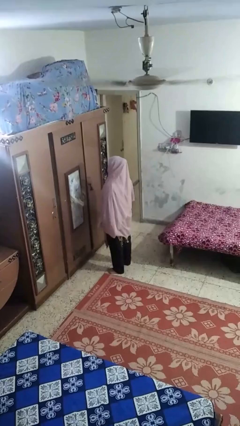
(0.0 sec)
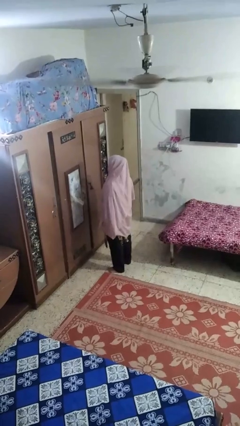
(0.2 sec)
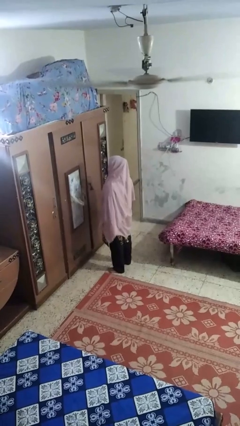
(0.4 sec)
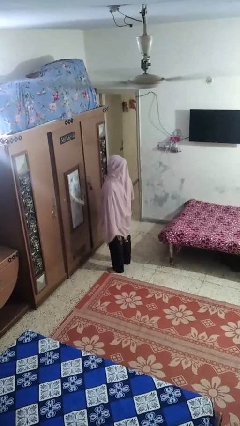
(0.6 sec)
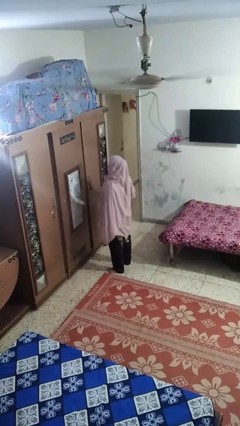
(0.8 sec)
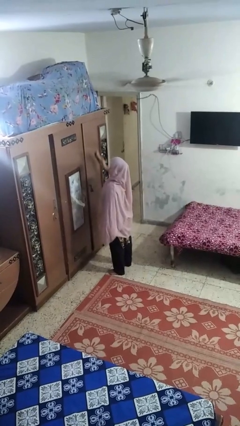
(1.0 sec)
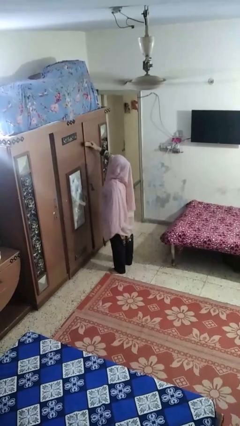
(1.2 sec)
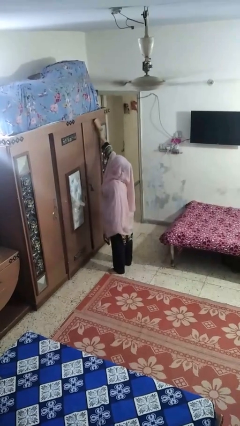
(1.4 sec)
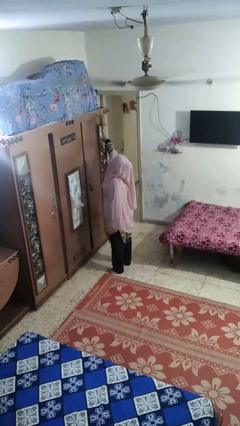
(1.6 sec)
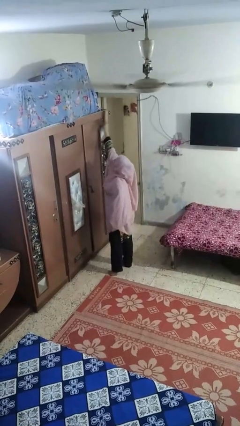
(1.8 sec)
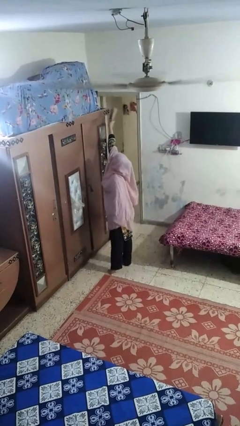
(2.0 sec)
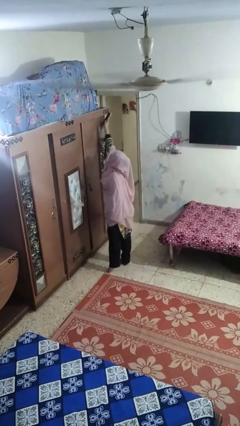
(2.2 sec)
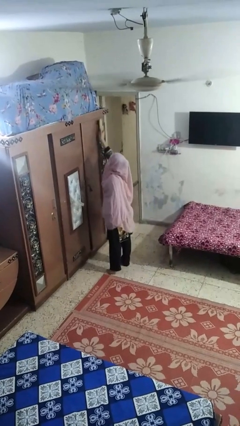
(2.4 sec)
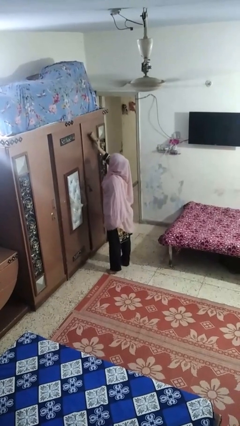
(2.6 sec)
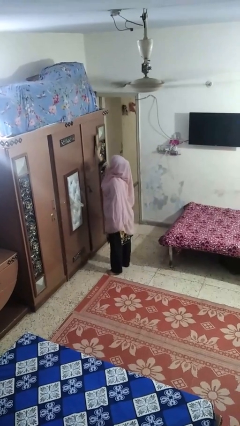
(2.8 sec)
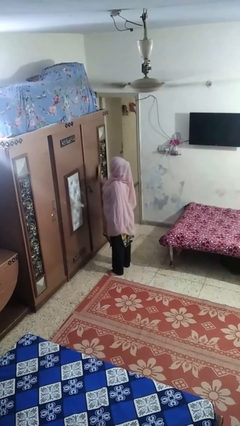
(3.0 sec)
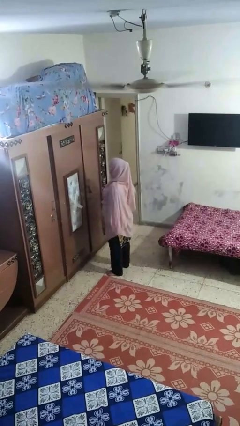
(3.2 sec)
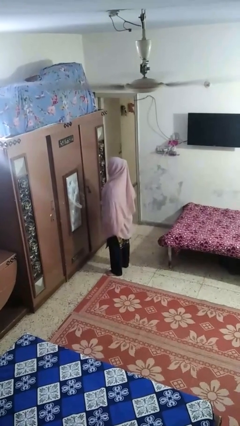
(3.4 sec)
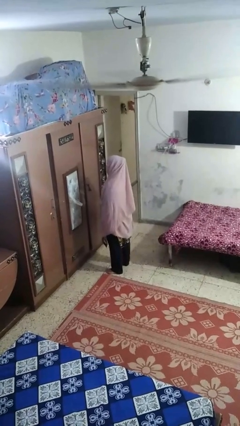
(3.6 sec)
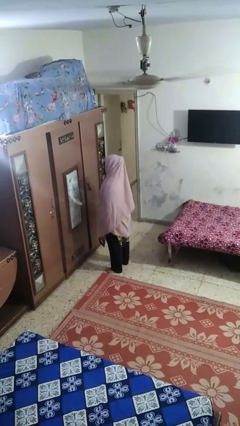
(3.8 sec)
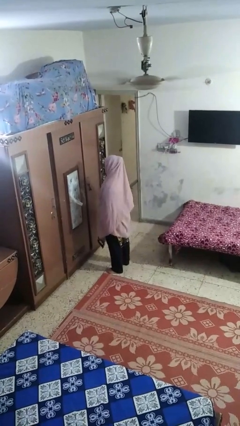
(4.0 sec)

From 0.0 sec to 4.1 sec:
person dusts furniture

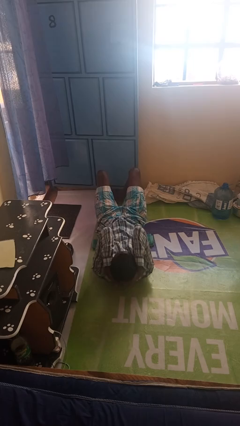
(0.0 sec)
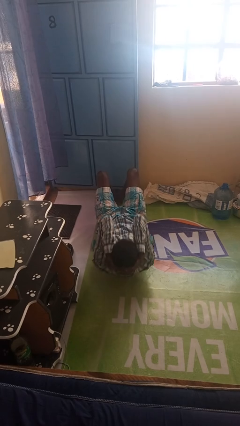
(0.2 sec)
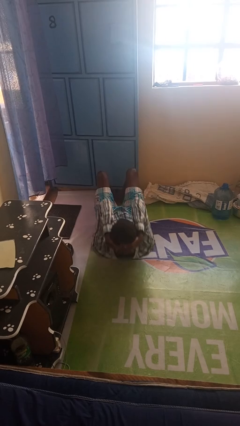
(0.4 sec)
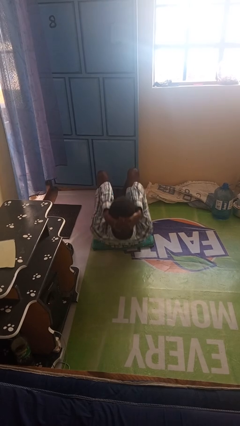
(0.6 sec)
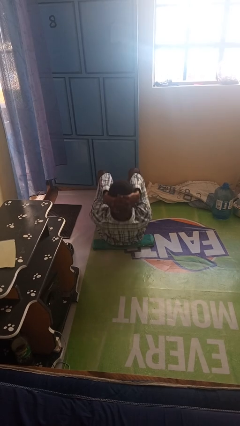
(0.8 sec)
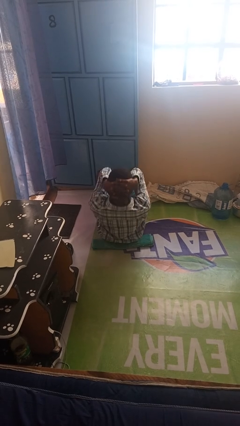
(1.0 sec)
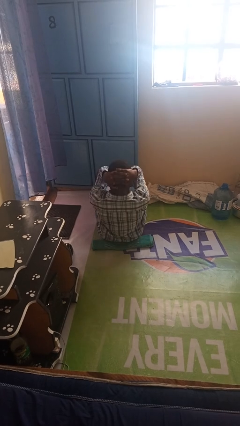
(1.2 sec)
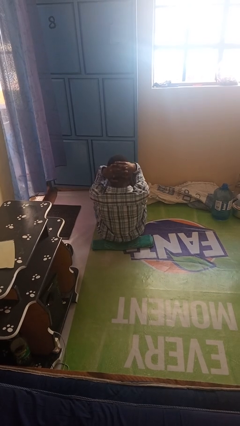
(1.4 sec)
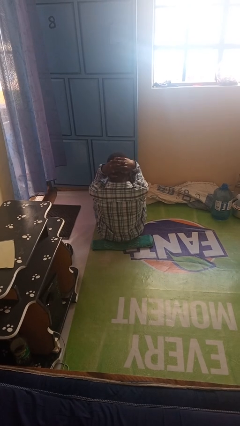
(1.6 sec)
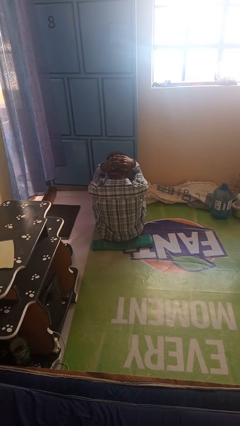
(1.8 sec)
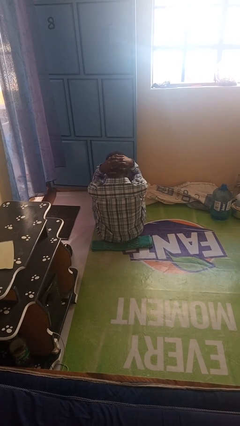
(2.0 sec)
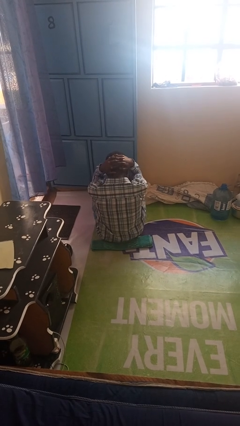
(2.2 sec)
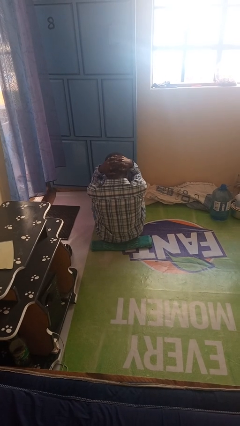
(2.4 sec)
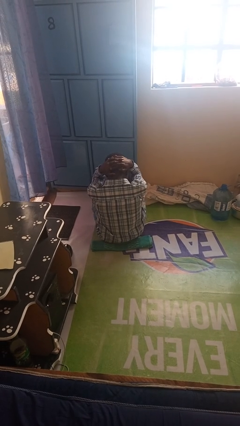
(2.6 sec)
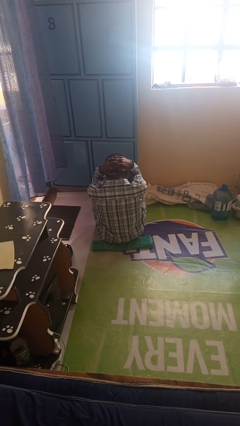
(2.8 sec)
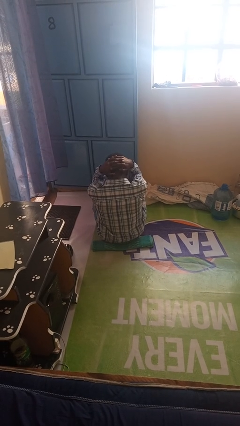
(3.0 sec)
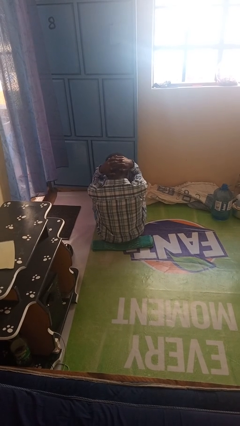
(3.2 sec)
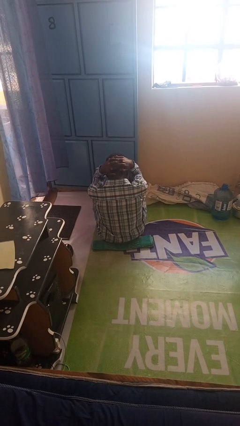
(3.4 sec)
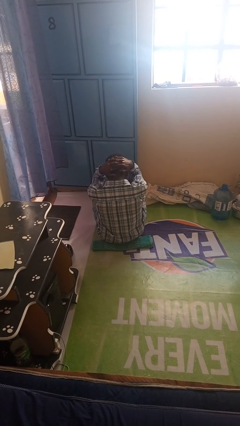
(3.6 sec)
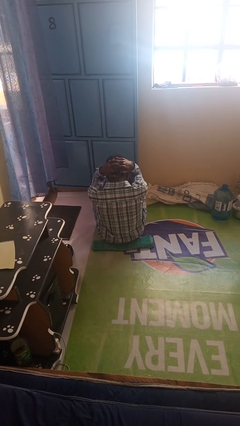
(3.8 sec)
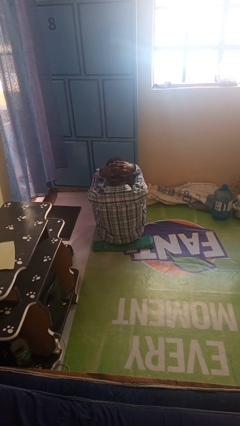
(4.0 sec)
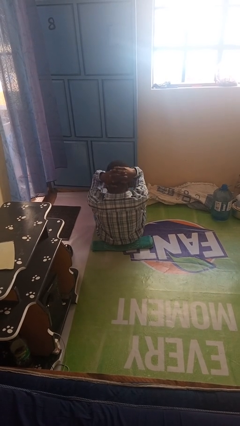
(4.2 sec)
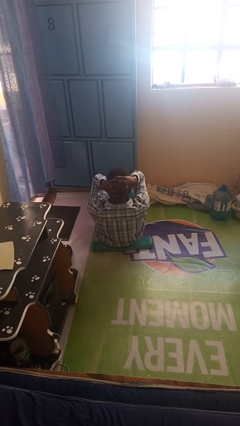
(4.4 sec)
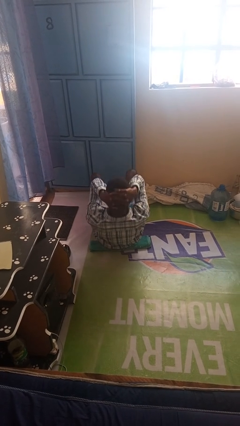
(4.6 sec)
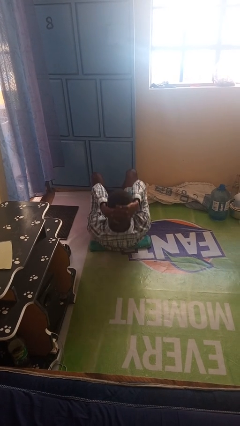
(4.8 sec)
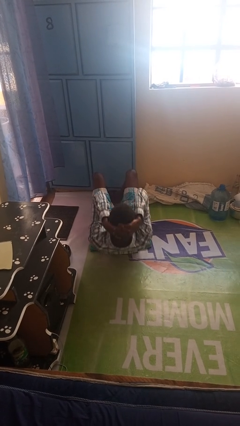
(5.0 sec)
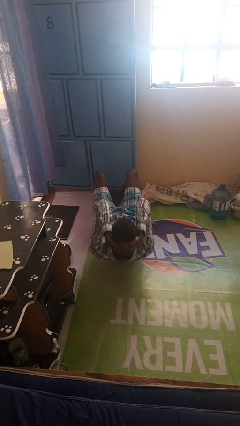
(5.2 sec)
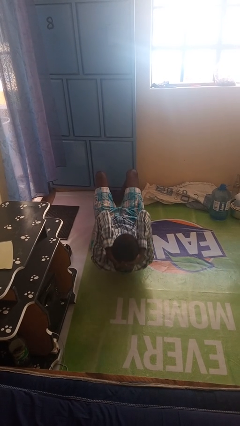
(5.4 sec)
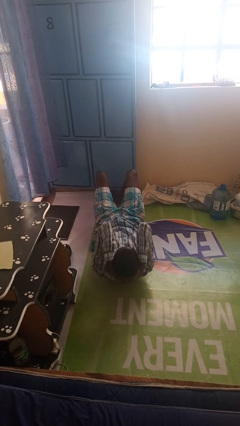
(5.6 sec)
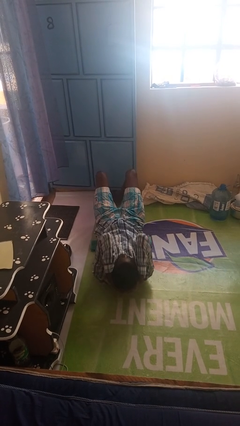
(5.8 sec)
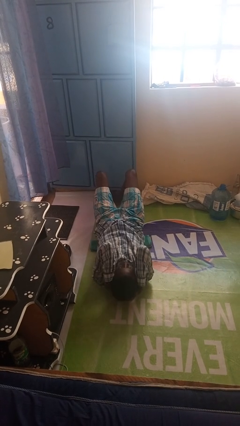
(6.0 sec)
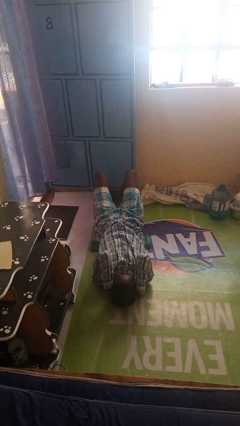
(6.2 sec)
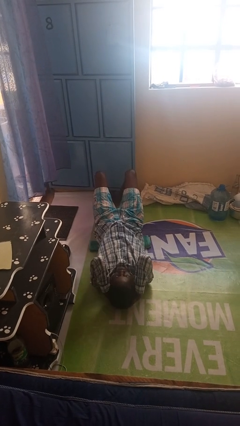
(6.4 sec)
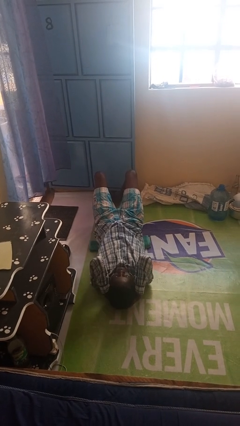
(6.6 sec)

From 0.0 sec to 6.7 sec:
person exercises with situp

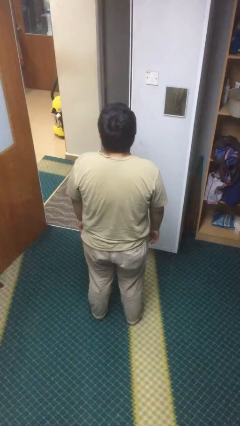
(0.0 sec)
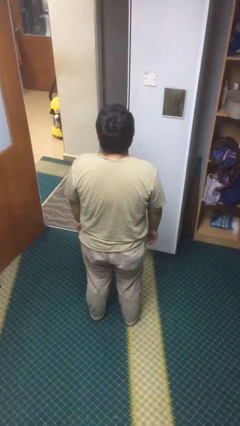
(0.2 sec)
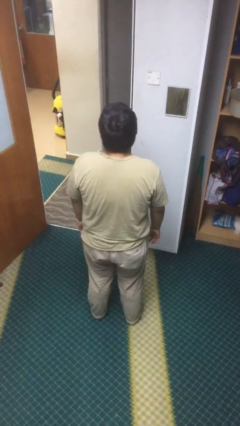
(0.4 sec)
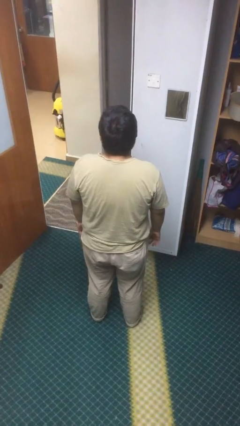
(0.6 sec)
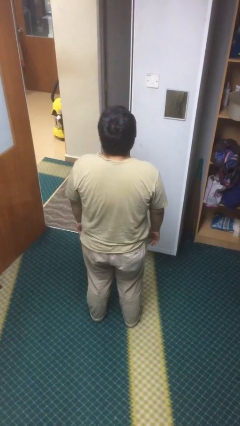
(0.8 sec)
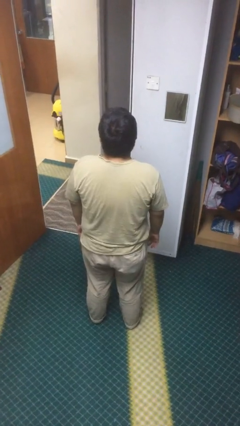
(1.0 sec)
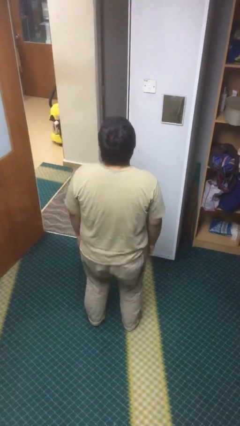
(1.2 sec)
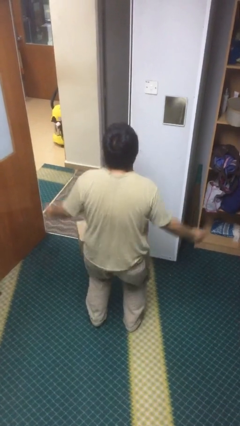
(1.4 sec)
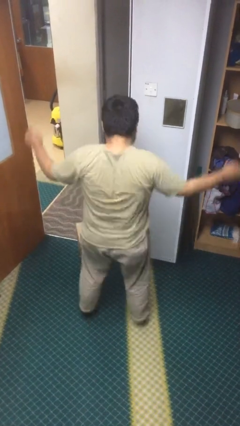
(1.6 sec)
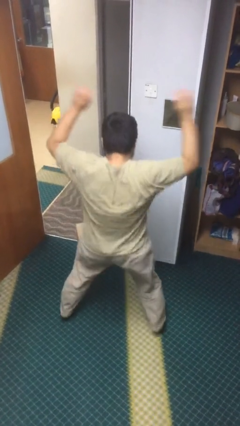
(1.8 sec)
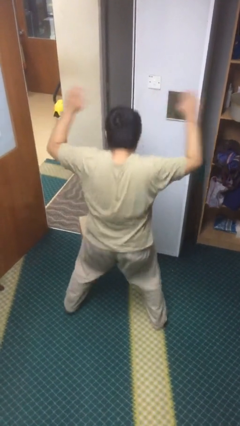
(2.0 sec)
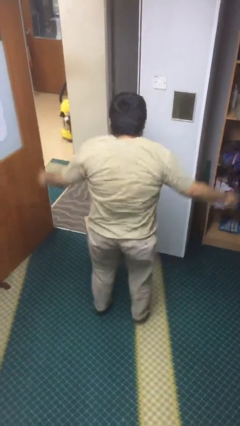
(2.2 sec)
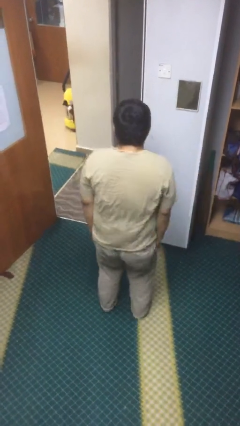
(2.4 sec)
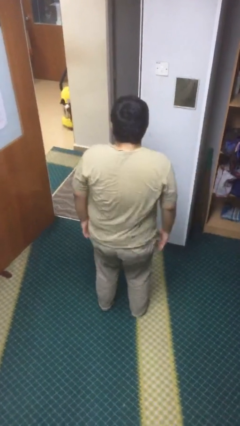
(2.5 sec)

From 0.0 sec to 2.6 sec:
person exercises with jumping jacks

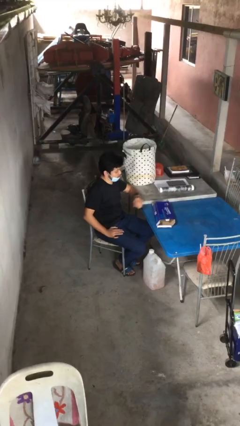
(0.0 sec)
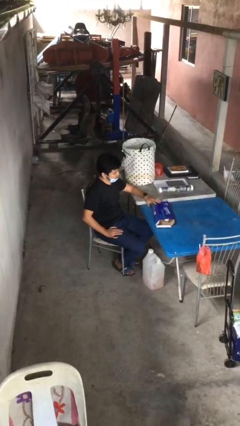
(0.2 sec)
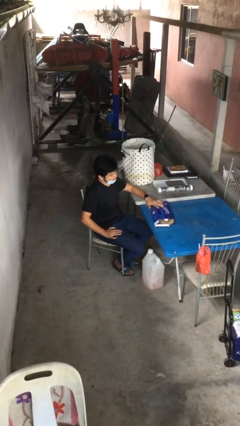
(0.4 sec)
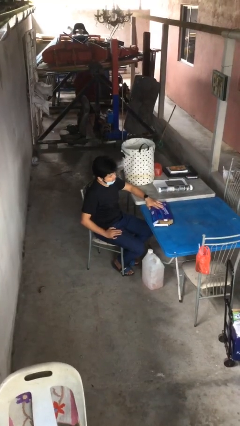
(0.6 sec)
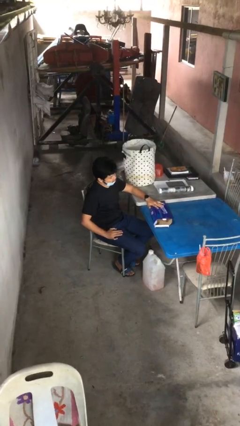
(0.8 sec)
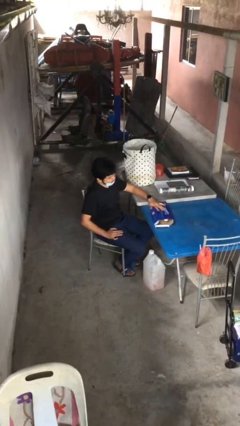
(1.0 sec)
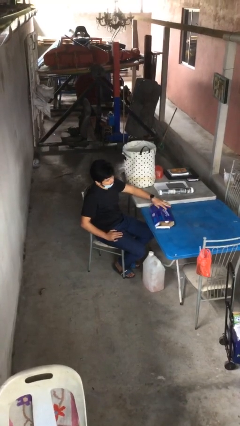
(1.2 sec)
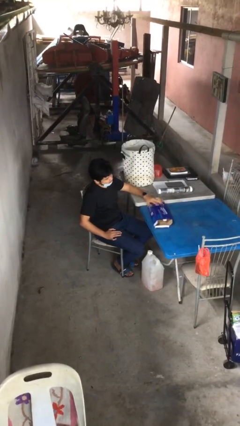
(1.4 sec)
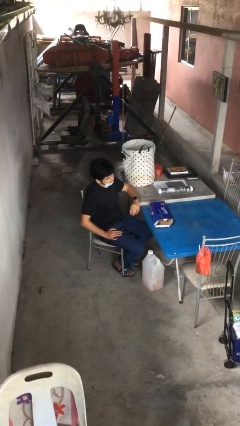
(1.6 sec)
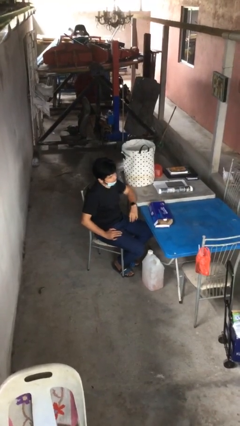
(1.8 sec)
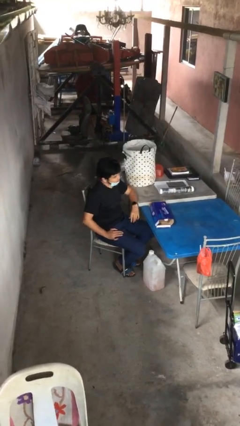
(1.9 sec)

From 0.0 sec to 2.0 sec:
person taps object with finger

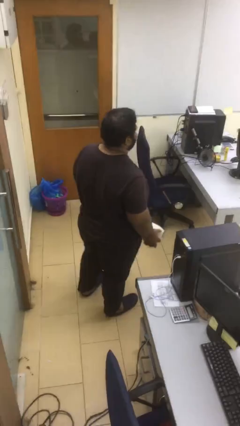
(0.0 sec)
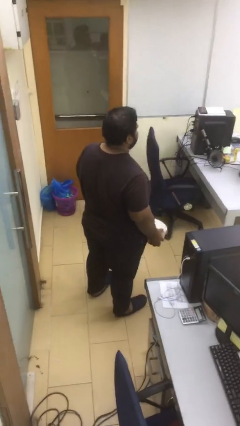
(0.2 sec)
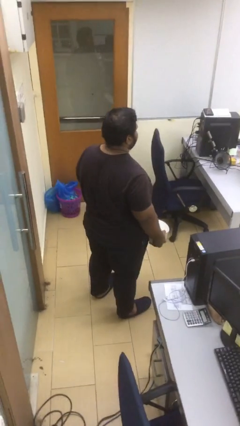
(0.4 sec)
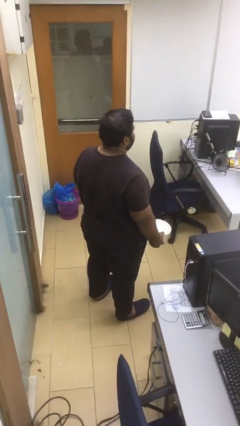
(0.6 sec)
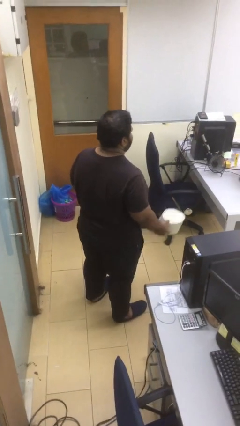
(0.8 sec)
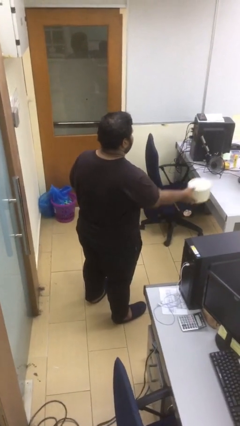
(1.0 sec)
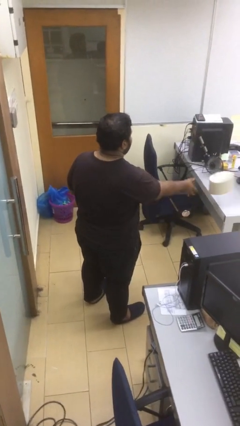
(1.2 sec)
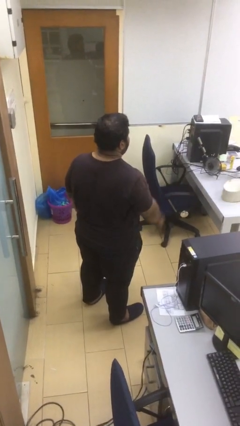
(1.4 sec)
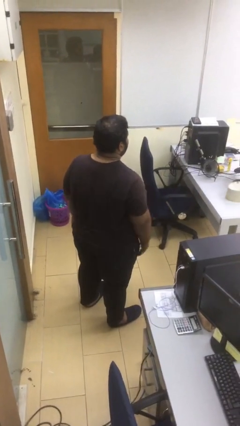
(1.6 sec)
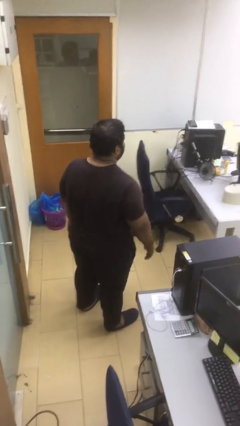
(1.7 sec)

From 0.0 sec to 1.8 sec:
person throws object on table

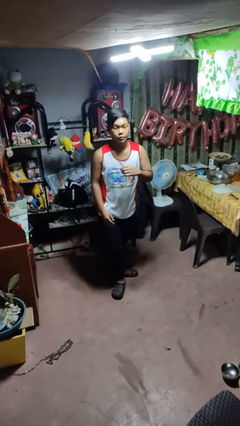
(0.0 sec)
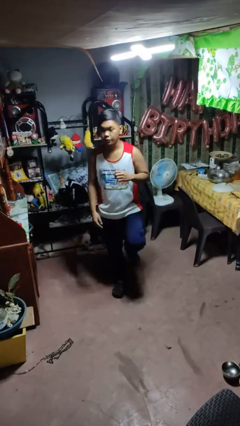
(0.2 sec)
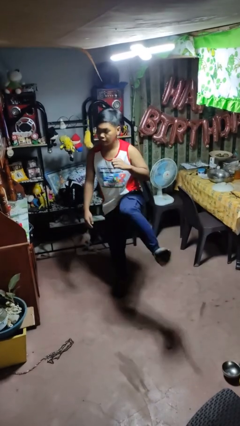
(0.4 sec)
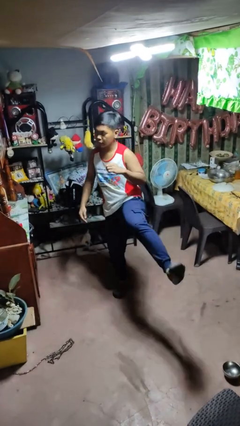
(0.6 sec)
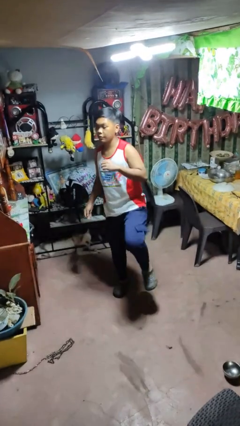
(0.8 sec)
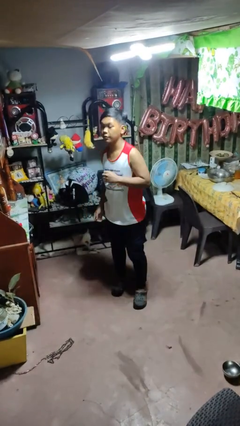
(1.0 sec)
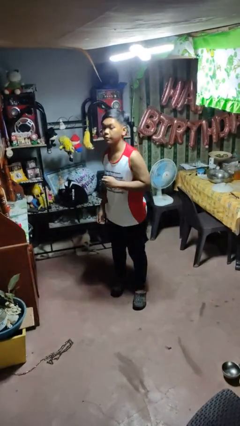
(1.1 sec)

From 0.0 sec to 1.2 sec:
person karate kicks
